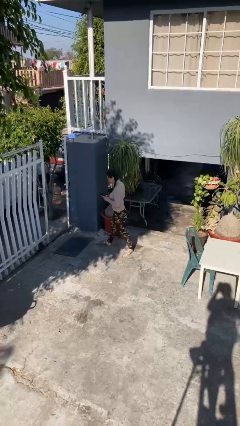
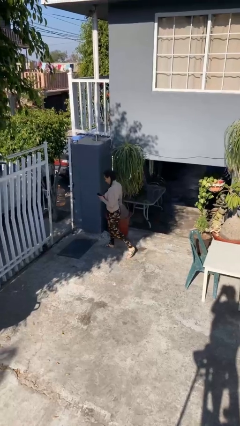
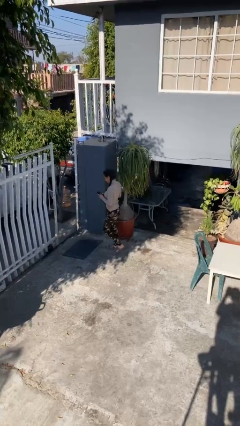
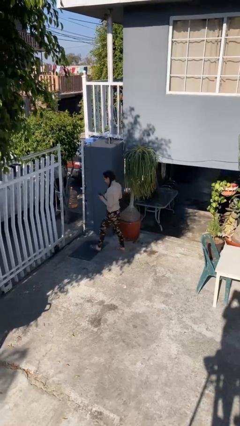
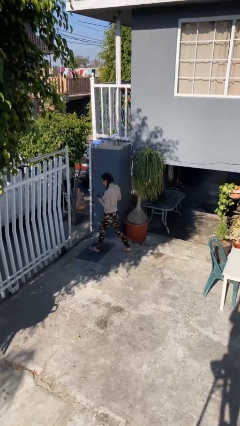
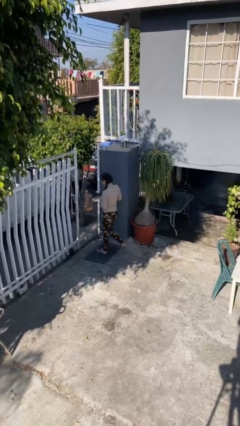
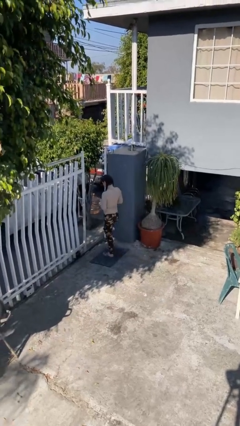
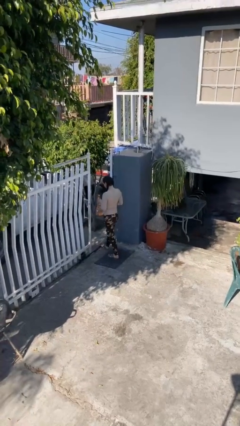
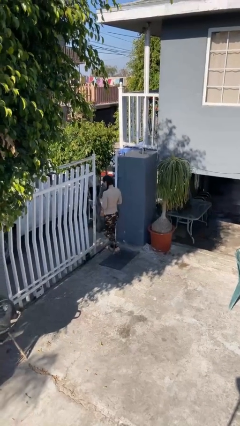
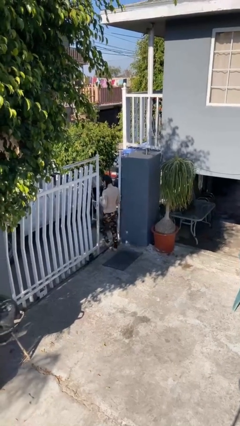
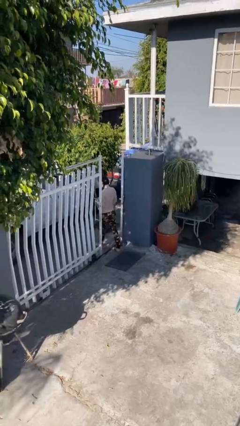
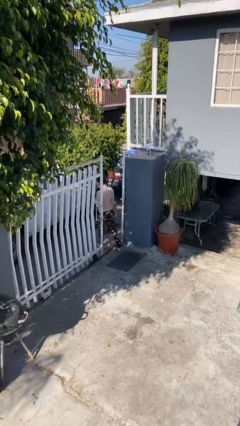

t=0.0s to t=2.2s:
person exits scene through structure

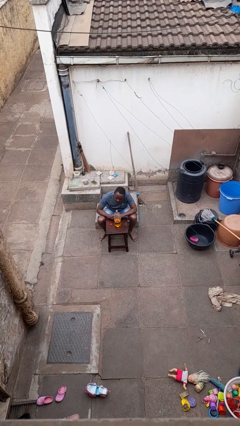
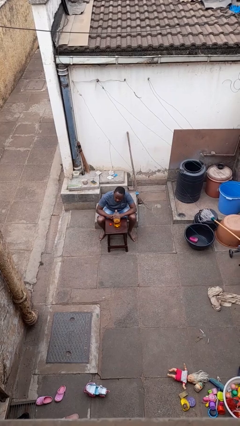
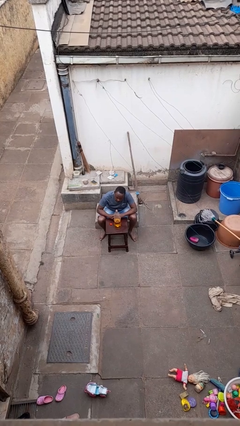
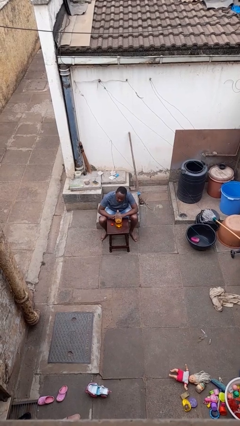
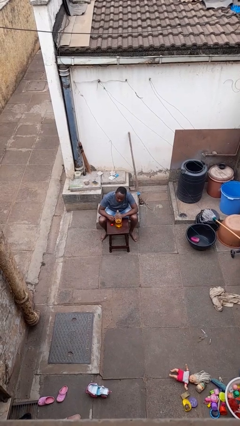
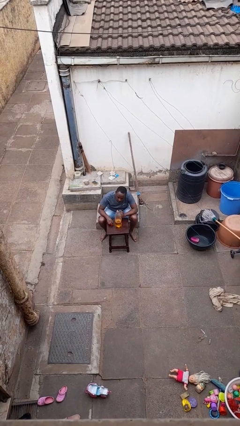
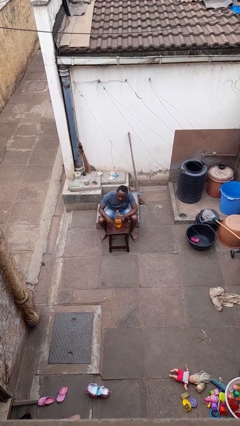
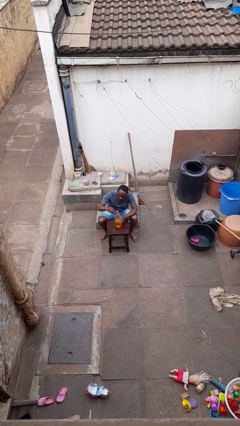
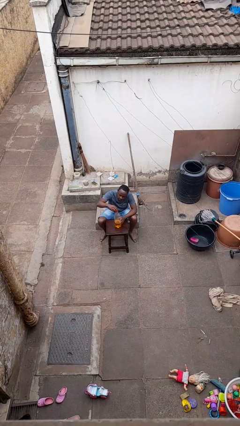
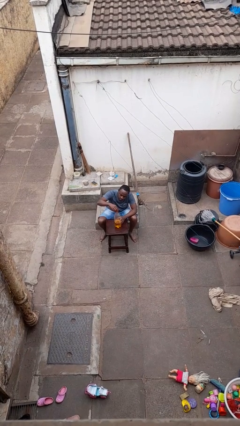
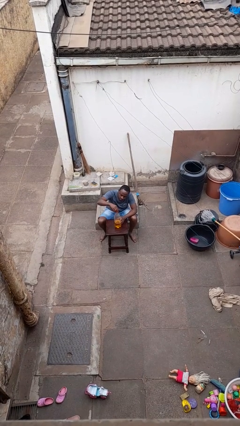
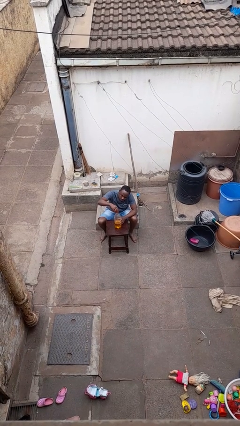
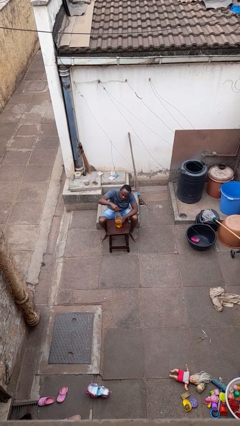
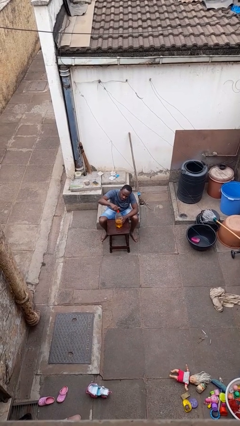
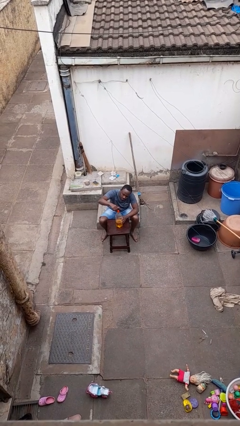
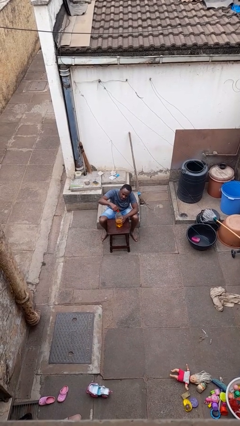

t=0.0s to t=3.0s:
person screws lid to bottle

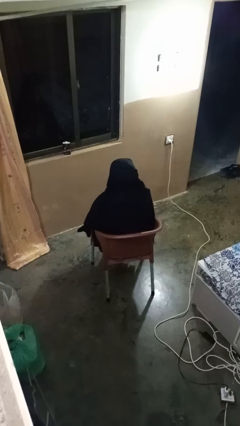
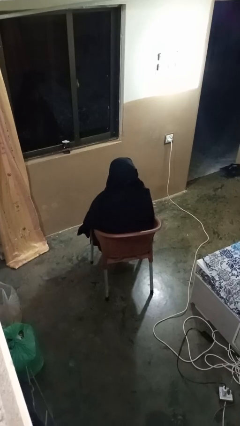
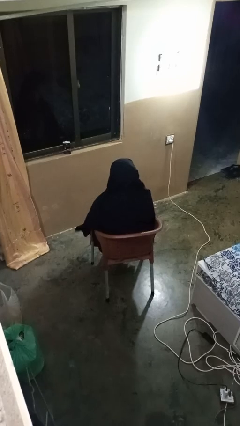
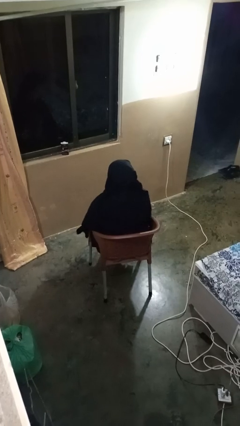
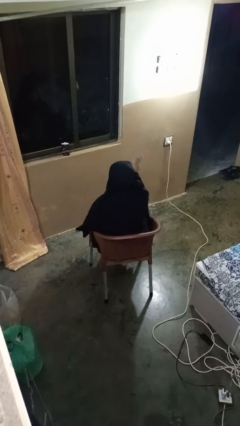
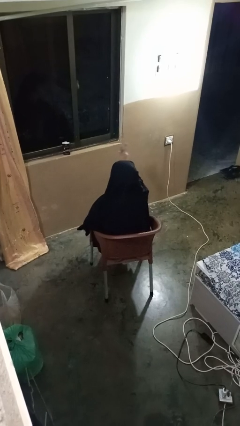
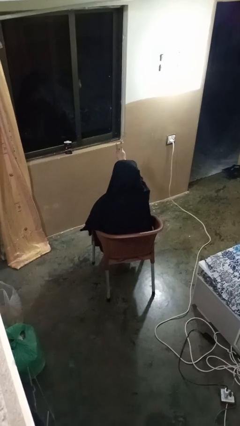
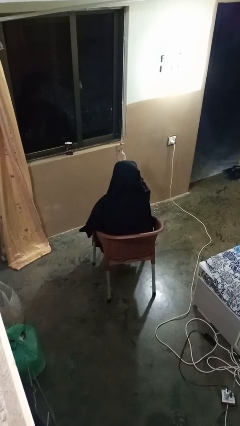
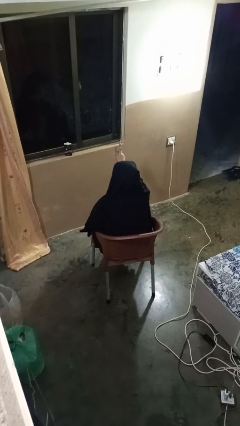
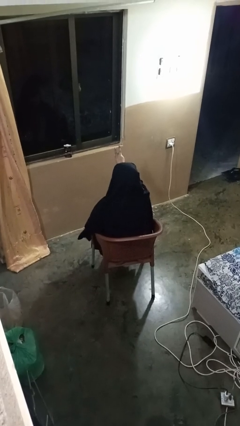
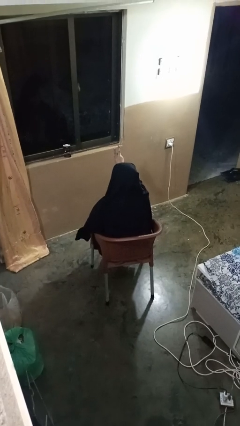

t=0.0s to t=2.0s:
person gestures peace

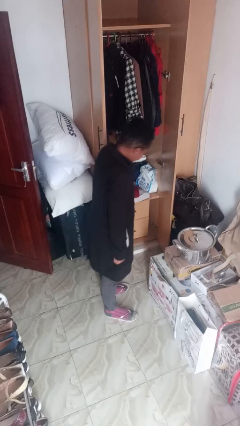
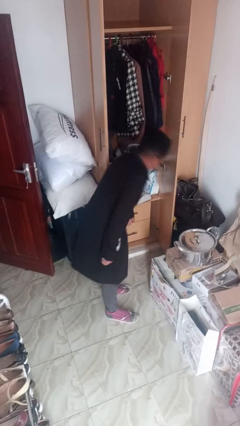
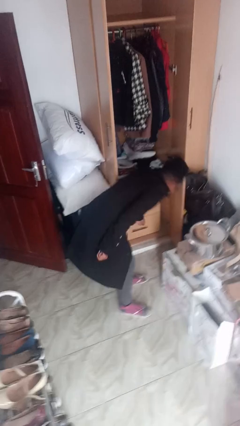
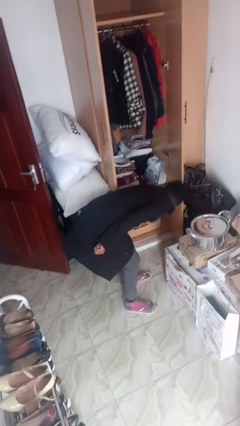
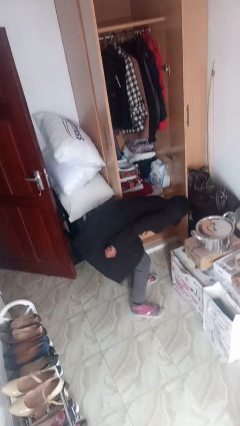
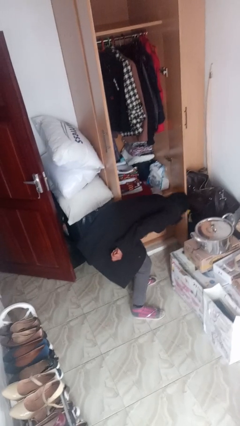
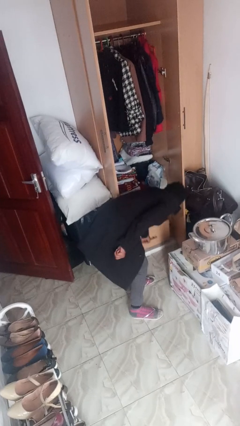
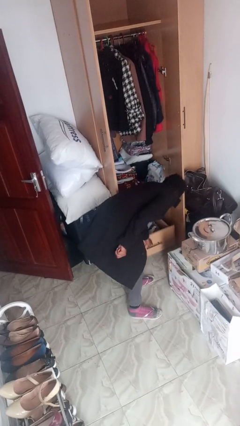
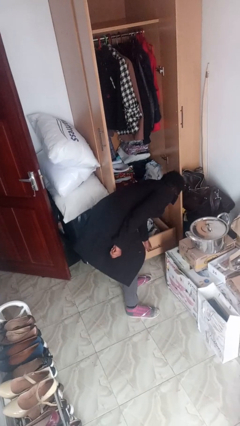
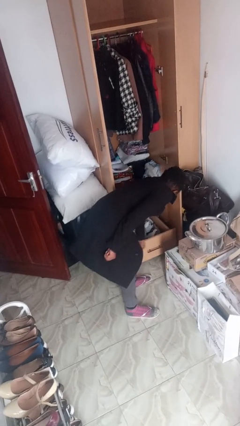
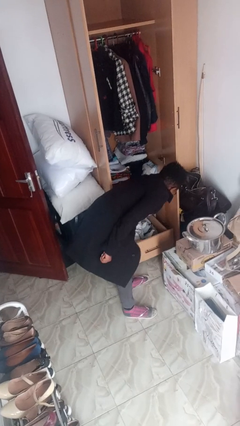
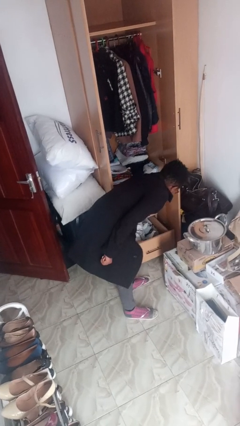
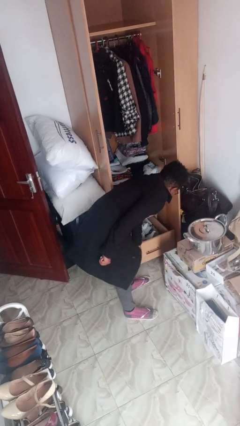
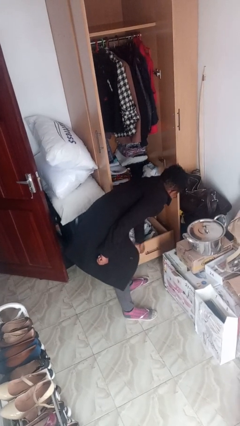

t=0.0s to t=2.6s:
person opens dresser drawer

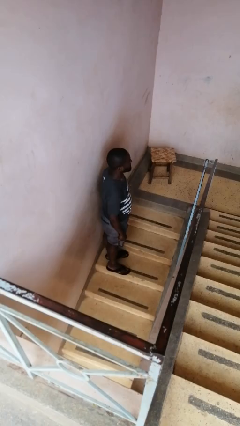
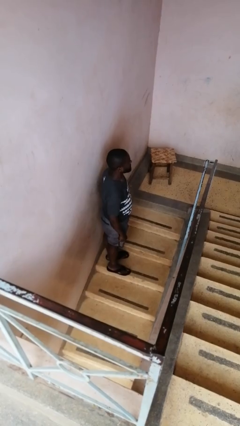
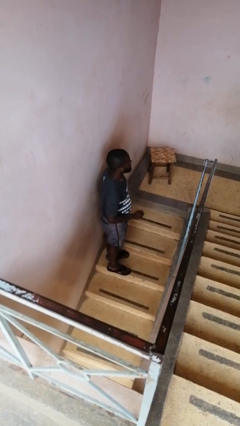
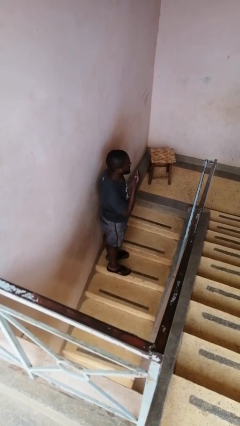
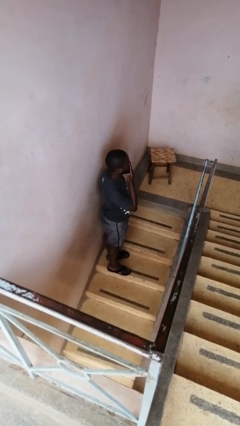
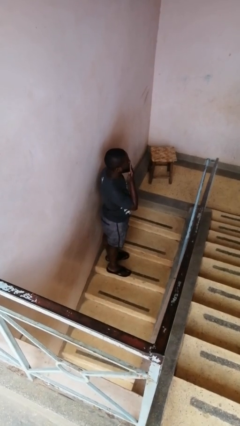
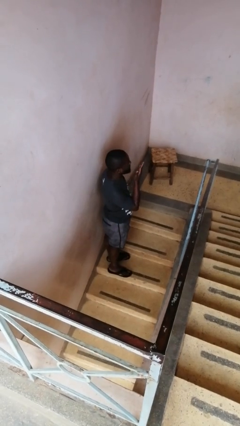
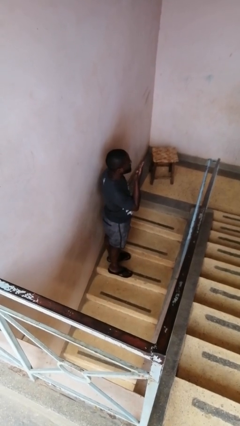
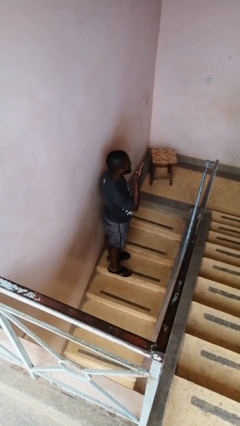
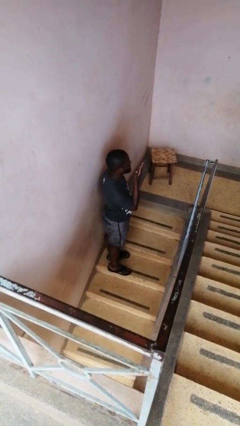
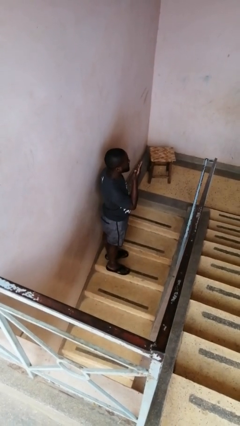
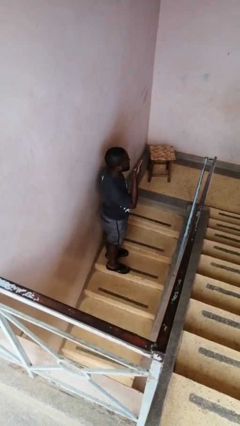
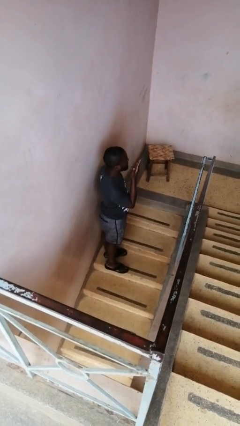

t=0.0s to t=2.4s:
person gestures blow kiss

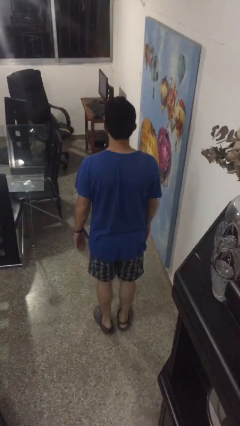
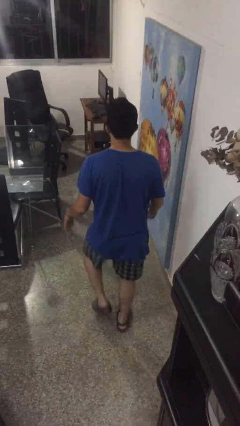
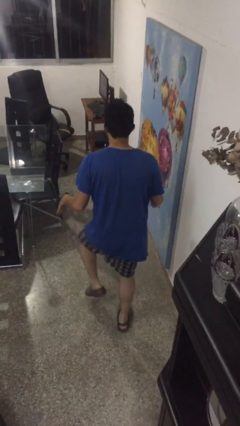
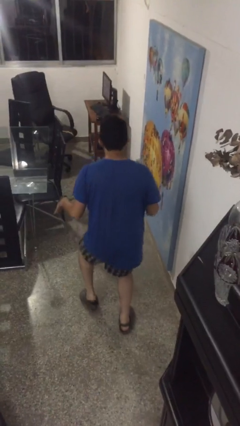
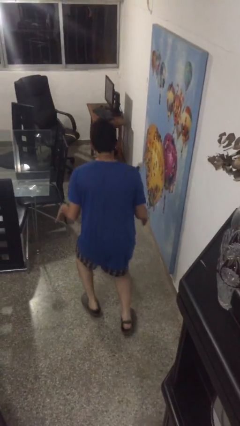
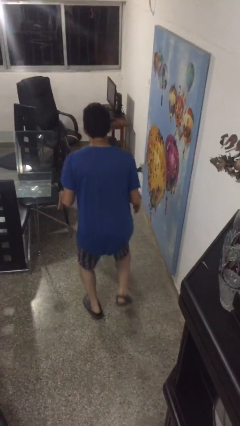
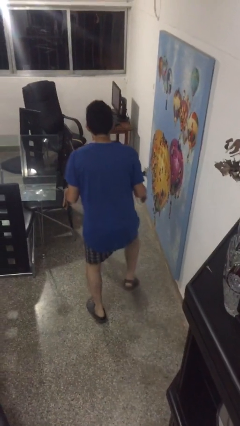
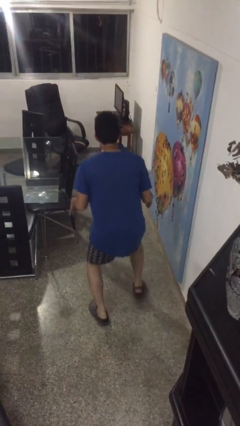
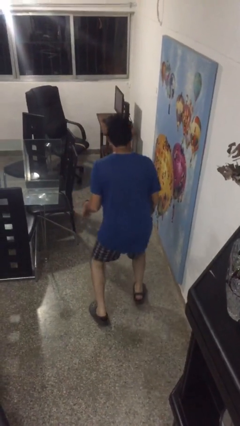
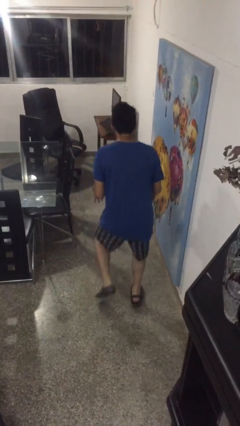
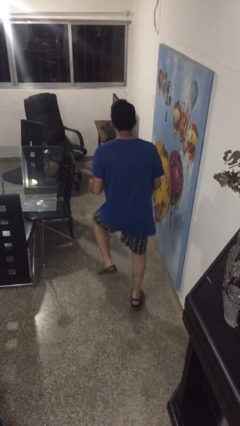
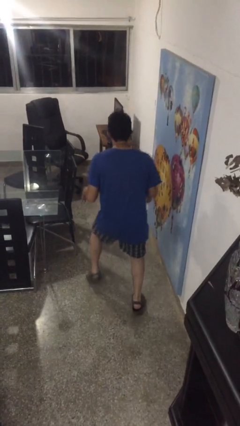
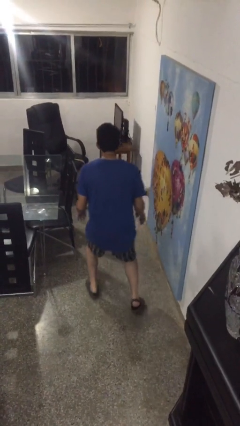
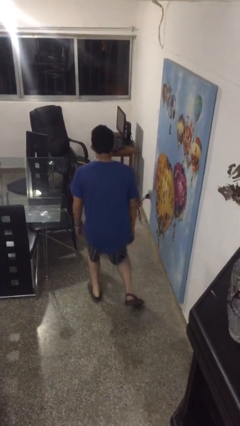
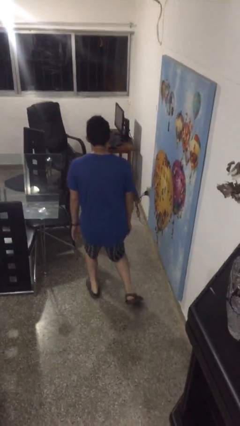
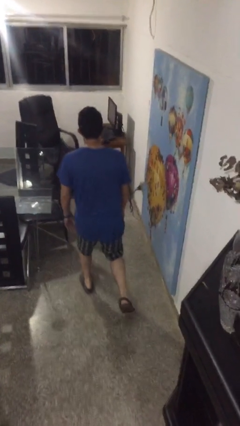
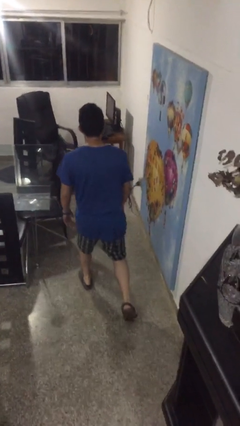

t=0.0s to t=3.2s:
person walks tiptoe

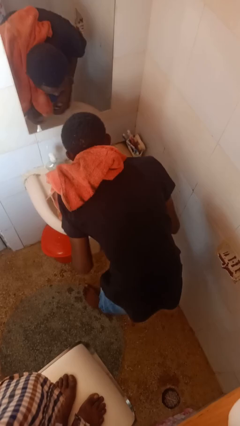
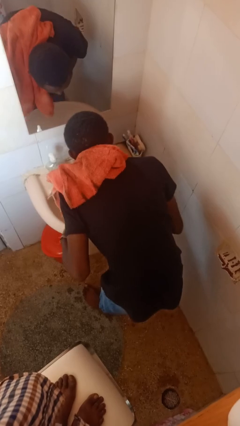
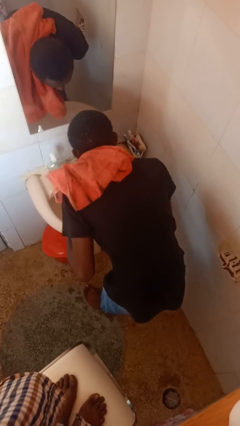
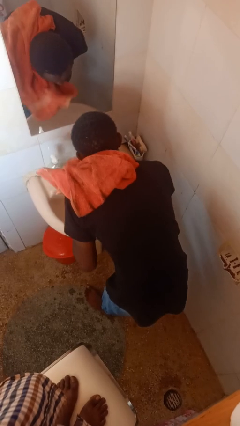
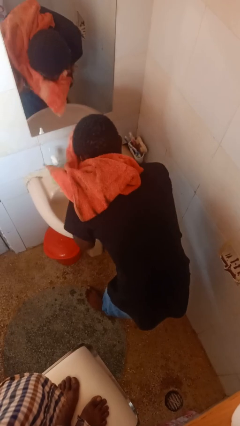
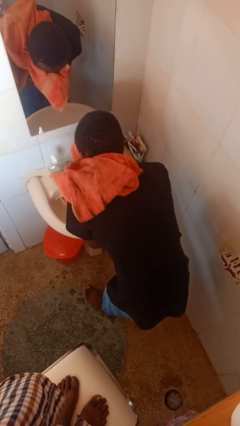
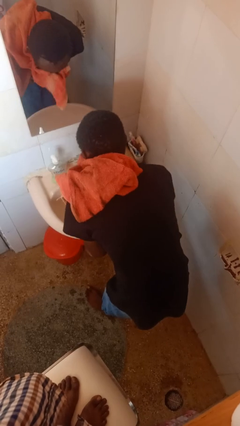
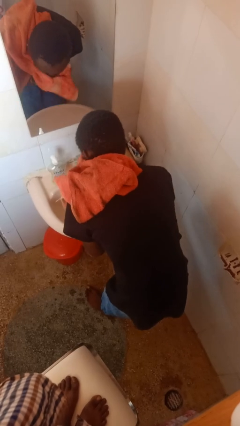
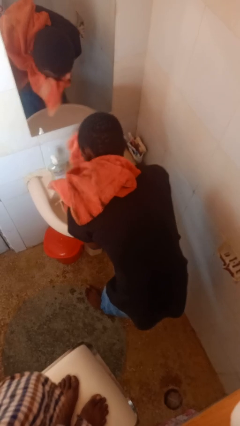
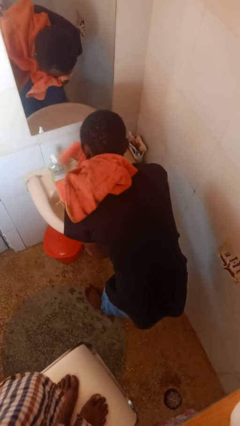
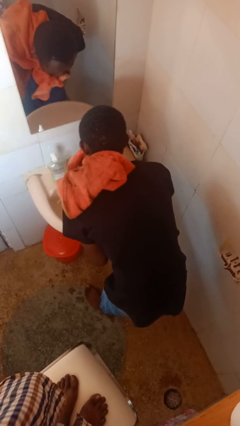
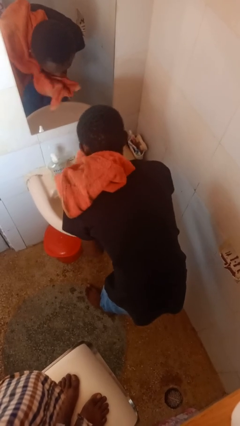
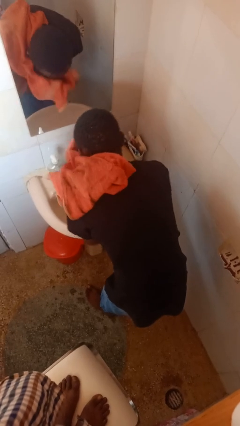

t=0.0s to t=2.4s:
person dries face with towel
